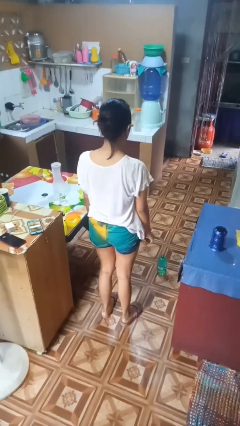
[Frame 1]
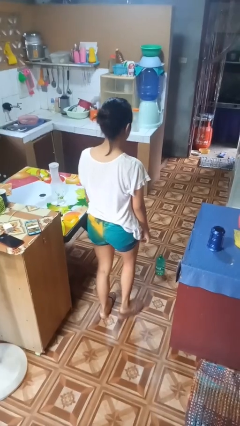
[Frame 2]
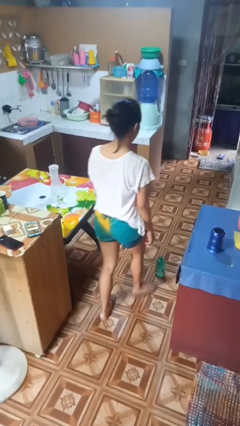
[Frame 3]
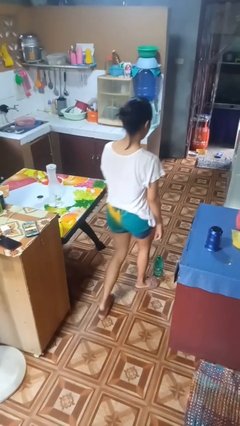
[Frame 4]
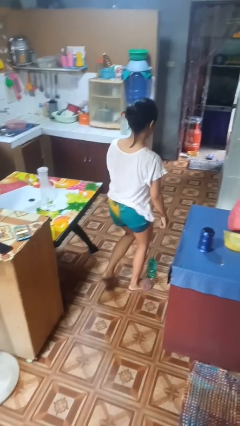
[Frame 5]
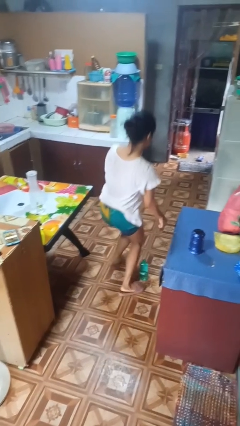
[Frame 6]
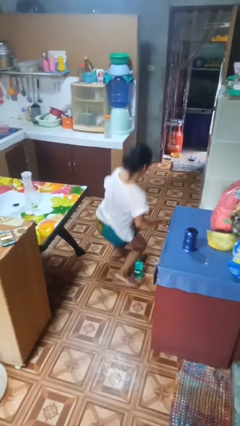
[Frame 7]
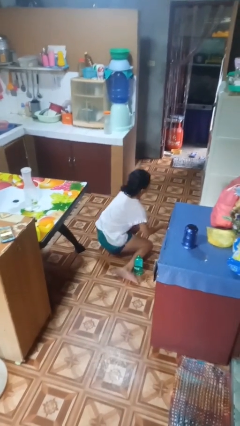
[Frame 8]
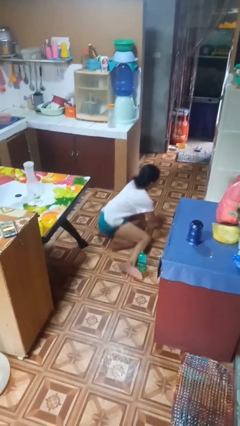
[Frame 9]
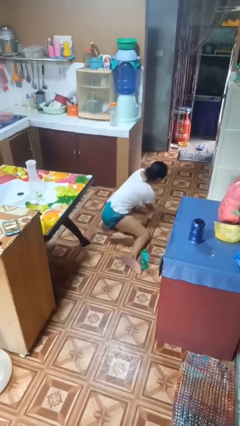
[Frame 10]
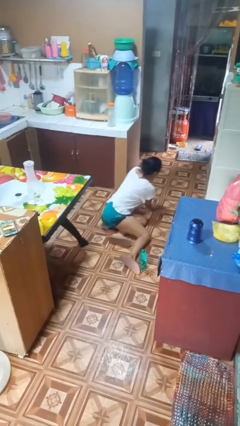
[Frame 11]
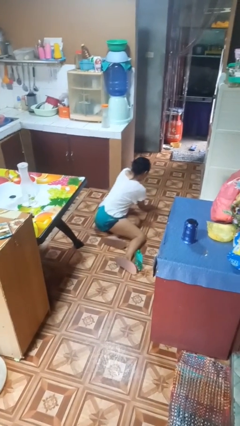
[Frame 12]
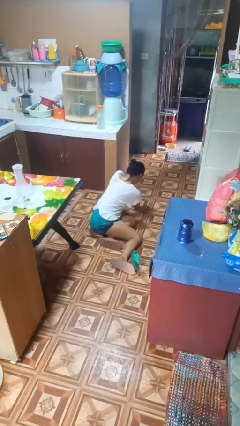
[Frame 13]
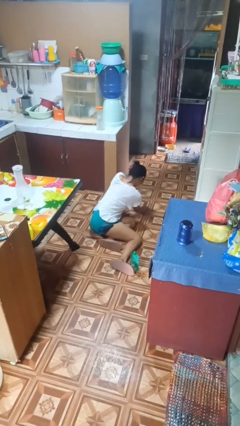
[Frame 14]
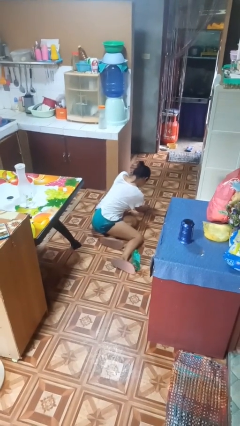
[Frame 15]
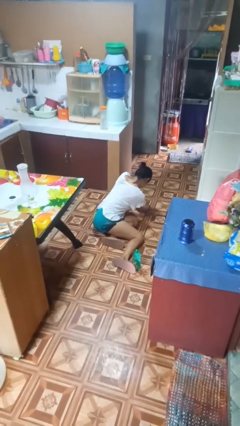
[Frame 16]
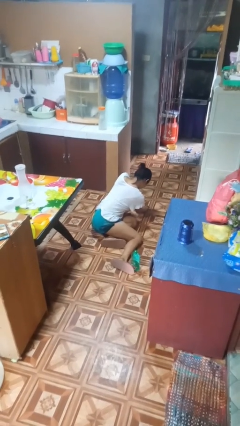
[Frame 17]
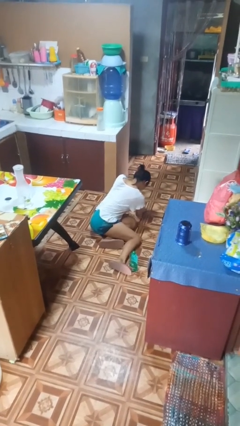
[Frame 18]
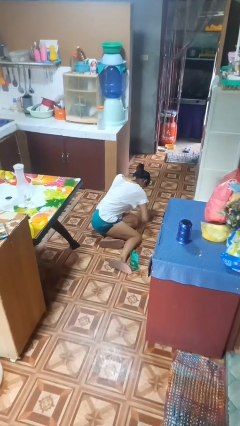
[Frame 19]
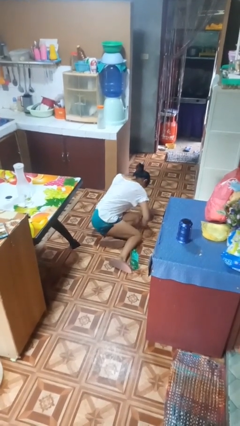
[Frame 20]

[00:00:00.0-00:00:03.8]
person trips on object on floor

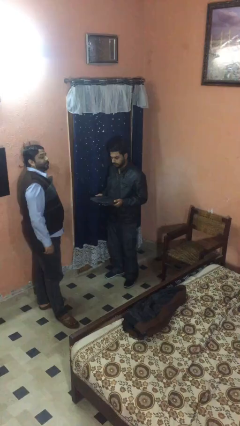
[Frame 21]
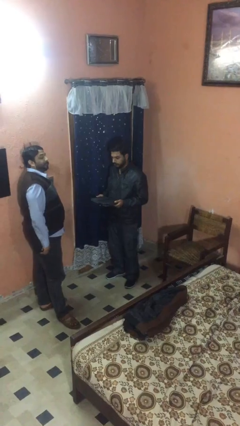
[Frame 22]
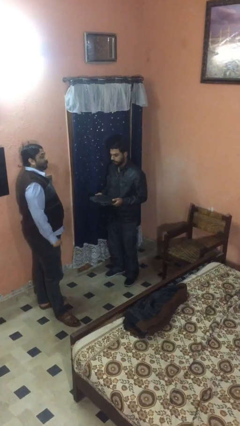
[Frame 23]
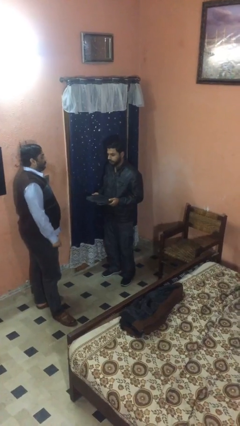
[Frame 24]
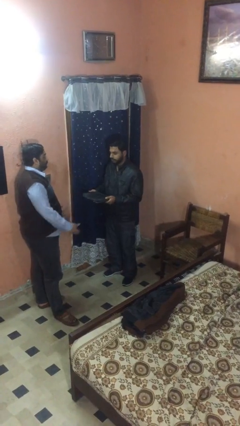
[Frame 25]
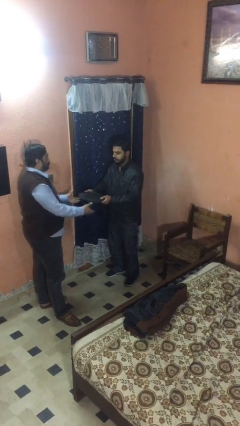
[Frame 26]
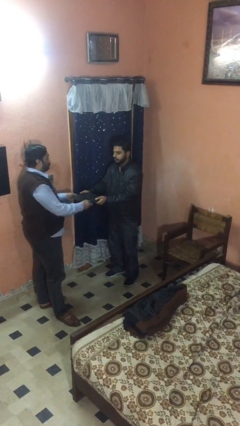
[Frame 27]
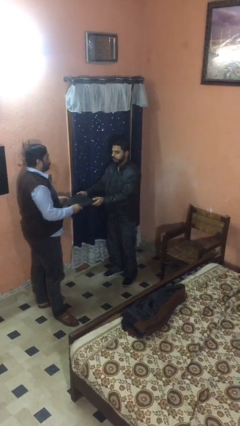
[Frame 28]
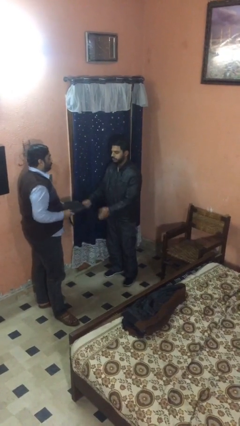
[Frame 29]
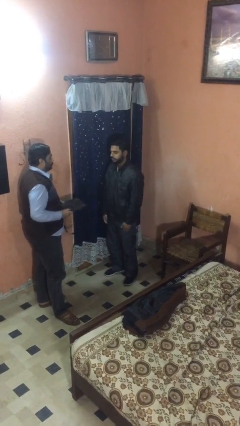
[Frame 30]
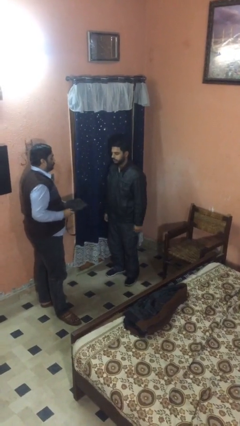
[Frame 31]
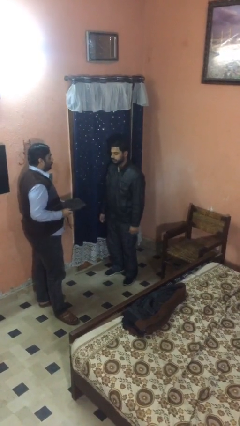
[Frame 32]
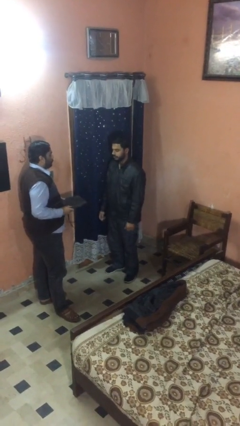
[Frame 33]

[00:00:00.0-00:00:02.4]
person transfers object to person

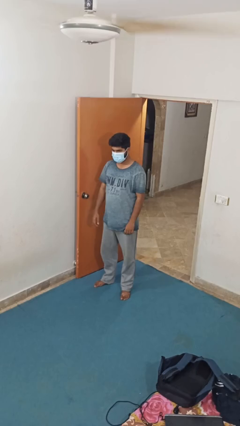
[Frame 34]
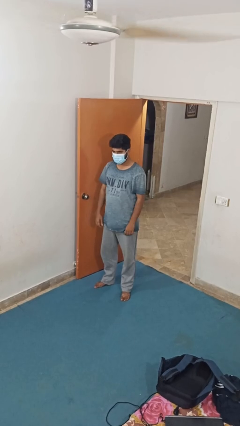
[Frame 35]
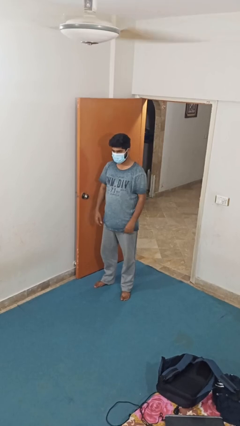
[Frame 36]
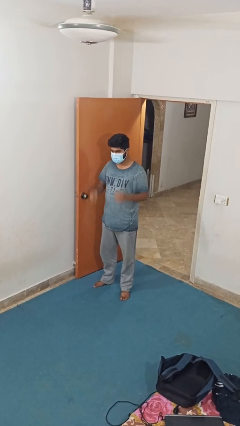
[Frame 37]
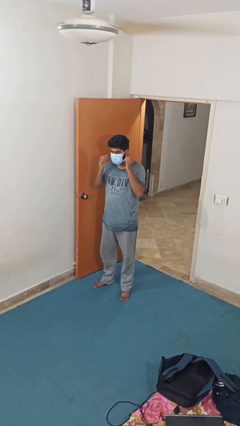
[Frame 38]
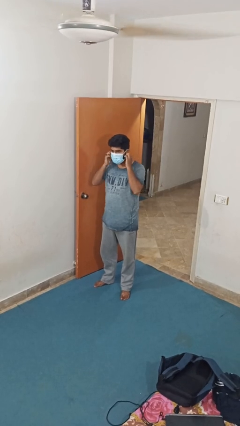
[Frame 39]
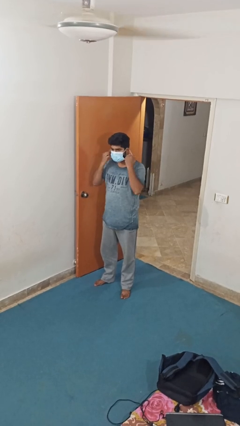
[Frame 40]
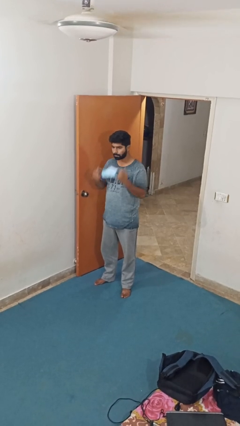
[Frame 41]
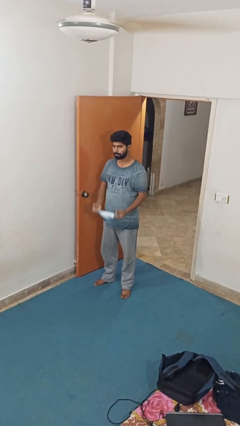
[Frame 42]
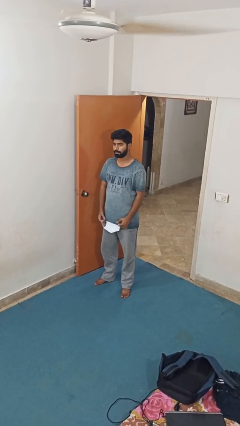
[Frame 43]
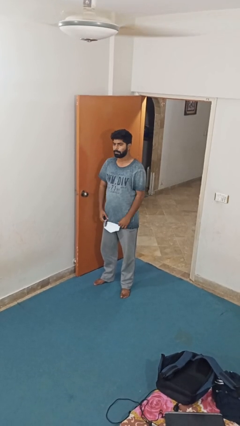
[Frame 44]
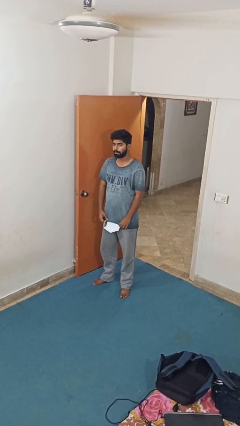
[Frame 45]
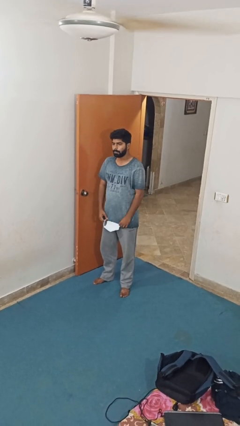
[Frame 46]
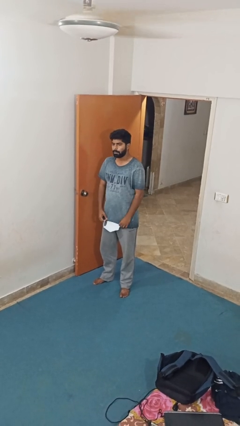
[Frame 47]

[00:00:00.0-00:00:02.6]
person takes off facemask

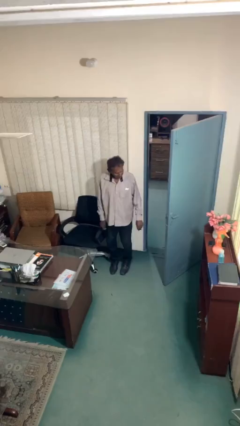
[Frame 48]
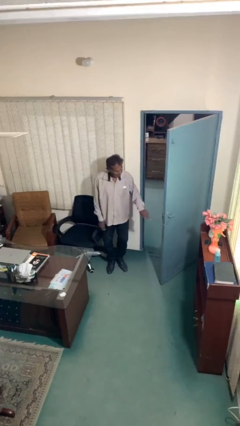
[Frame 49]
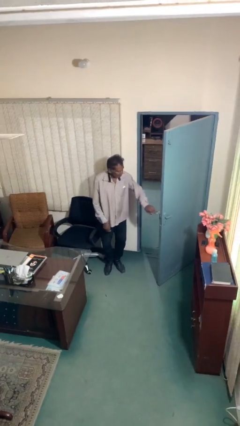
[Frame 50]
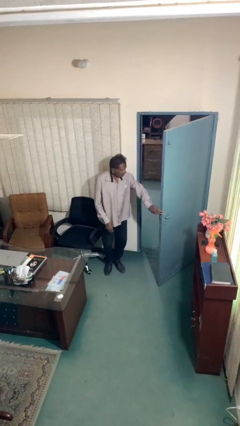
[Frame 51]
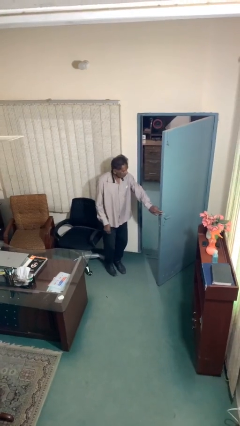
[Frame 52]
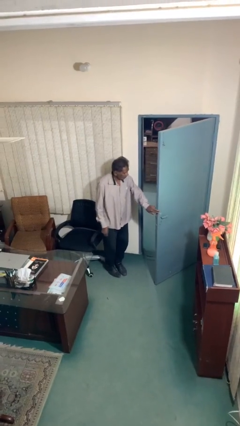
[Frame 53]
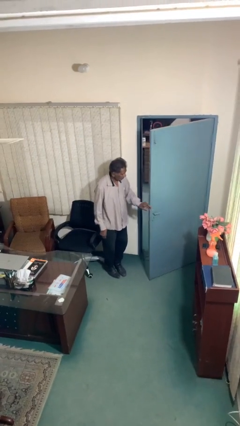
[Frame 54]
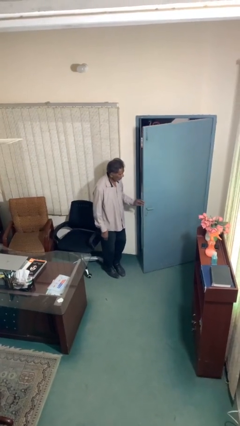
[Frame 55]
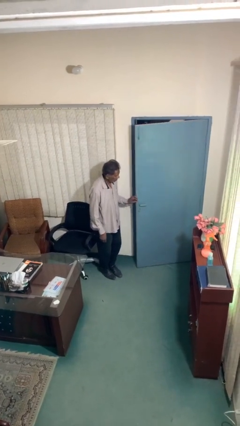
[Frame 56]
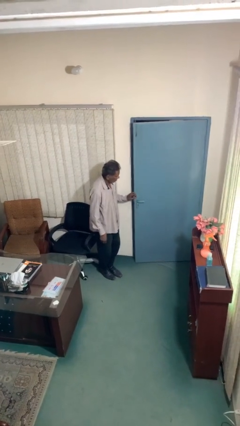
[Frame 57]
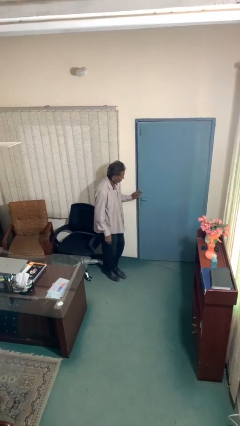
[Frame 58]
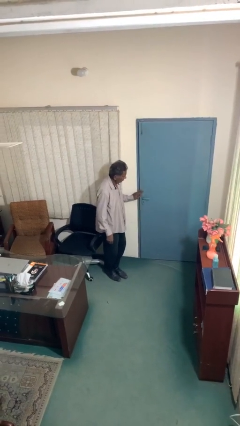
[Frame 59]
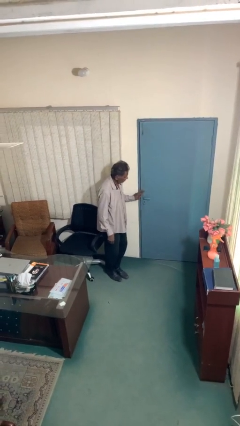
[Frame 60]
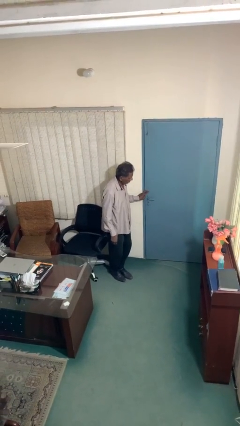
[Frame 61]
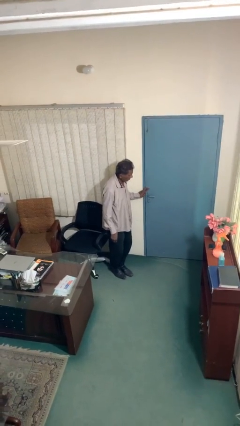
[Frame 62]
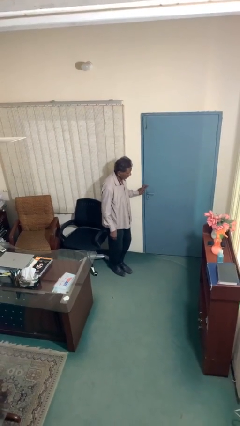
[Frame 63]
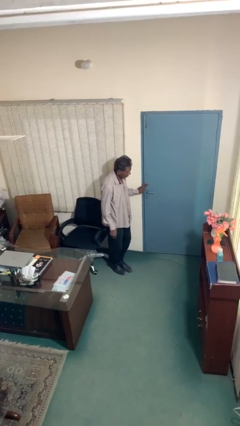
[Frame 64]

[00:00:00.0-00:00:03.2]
person closes facility door

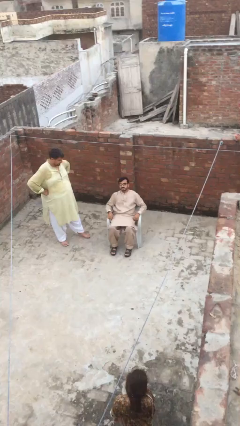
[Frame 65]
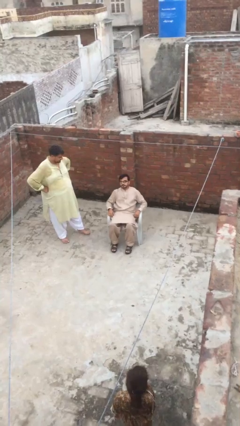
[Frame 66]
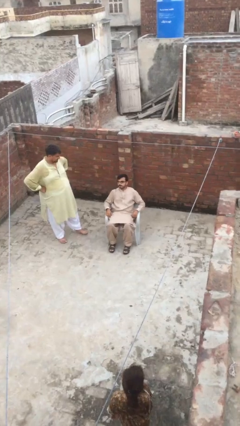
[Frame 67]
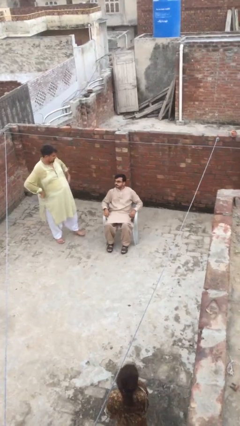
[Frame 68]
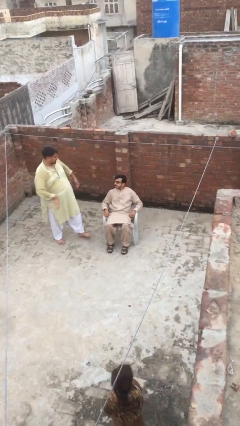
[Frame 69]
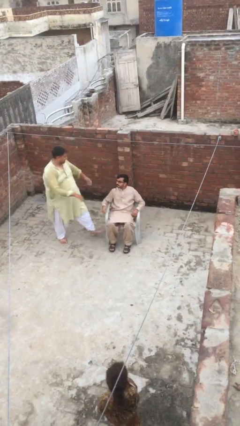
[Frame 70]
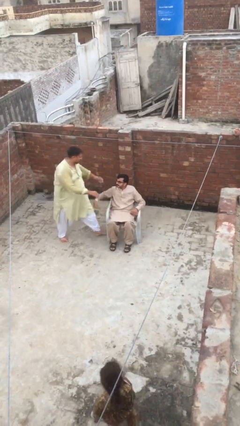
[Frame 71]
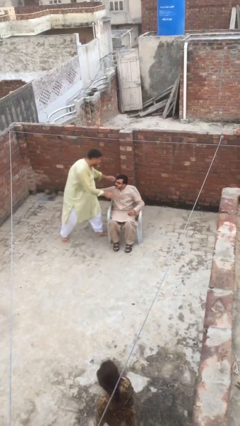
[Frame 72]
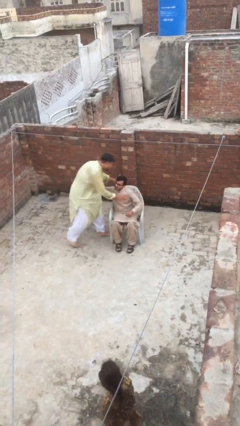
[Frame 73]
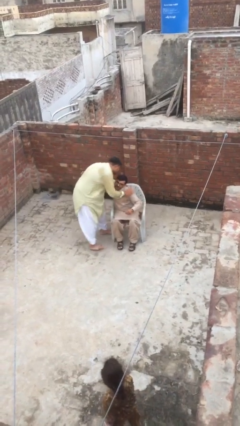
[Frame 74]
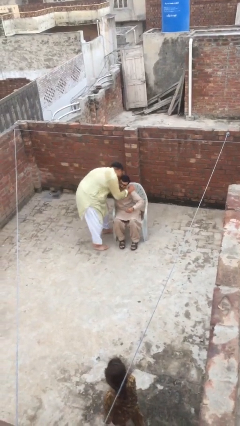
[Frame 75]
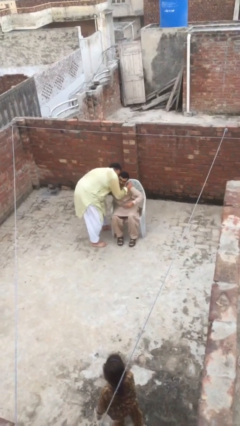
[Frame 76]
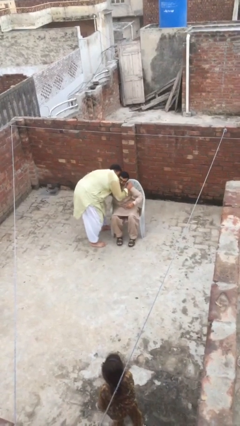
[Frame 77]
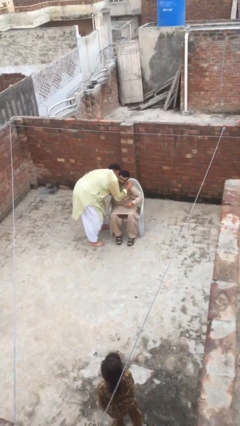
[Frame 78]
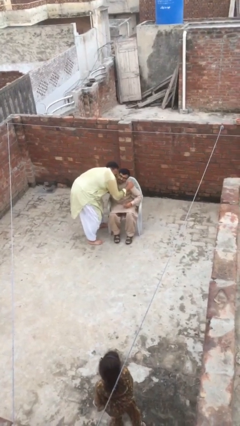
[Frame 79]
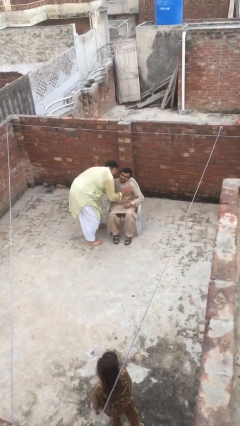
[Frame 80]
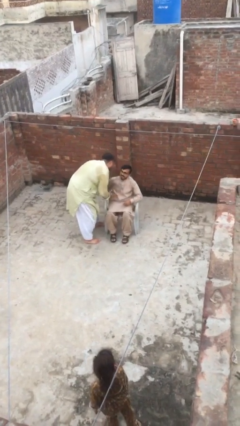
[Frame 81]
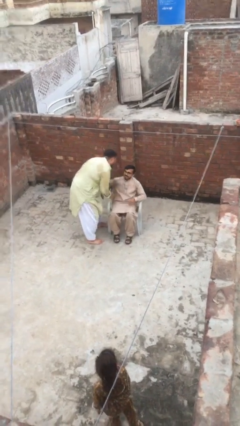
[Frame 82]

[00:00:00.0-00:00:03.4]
person embraces person

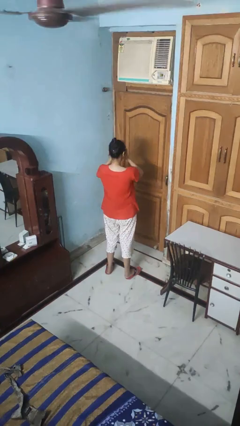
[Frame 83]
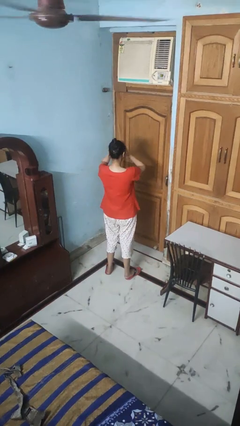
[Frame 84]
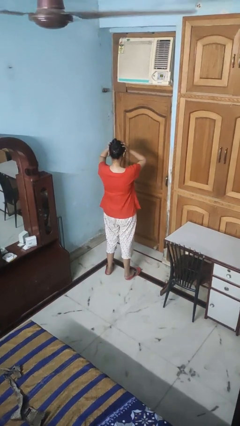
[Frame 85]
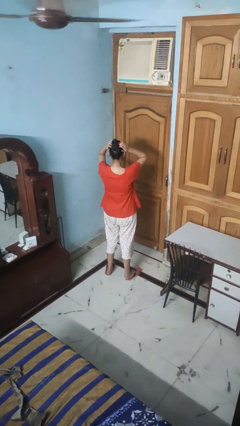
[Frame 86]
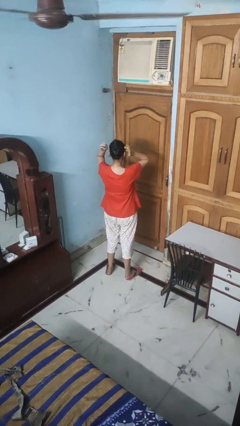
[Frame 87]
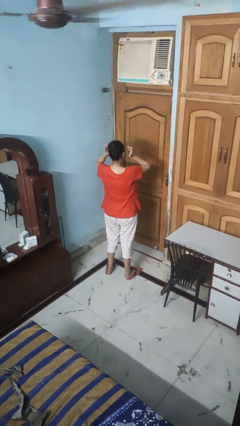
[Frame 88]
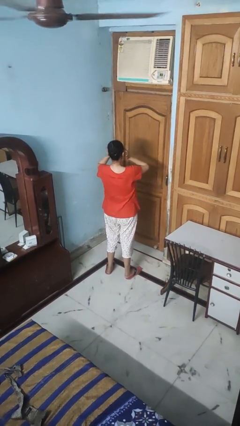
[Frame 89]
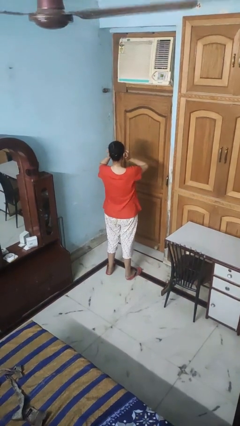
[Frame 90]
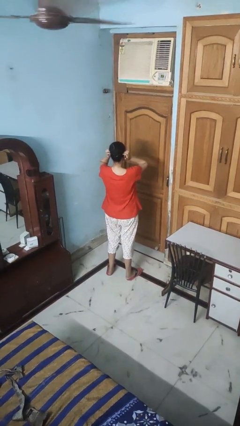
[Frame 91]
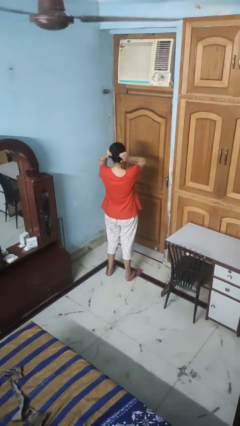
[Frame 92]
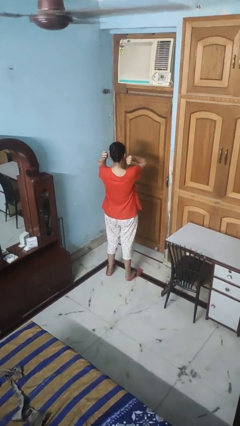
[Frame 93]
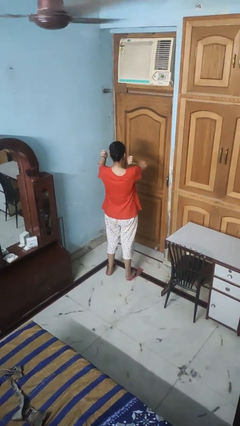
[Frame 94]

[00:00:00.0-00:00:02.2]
person strokes hair
